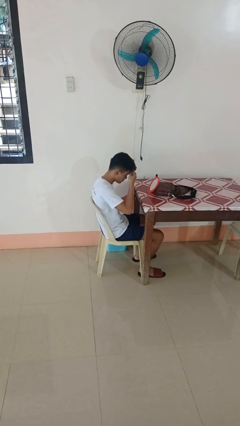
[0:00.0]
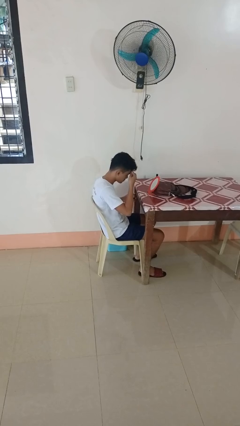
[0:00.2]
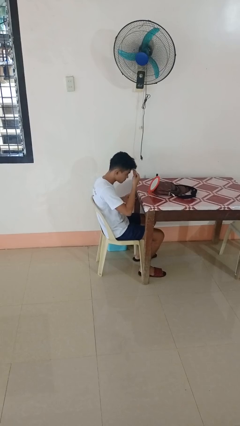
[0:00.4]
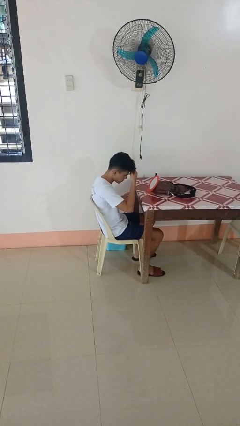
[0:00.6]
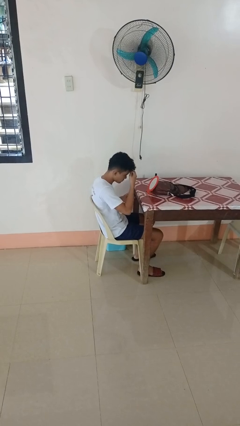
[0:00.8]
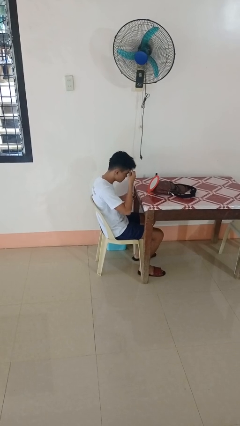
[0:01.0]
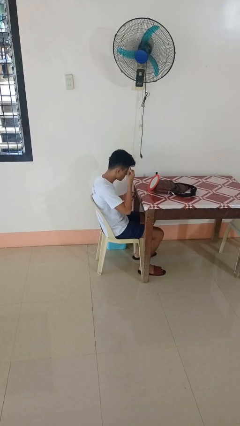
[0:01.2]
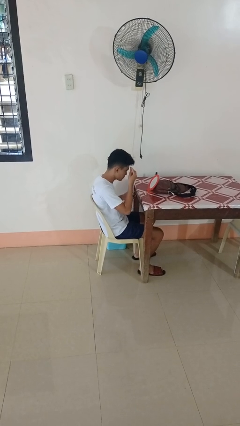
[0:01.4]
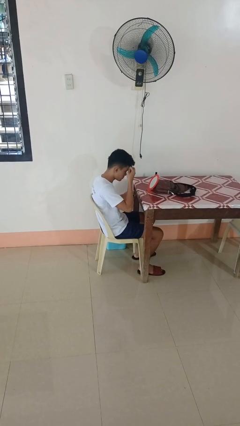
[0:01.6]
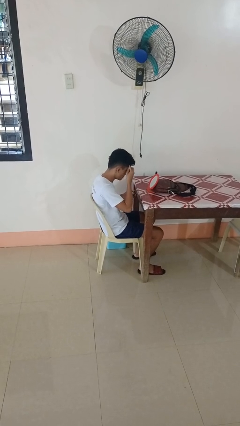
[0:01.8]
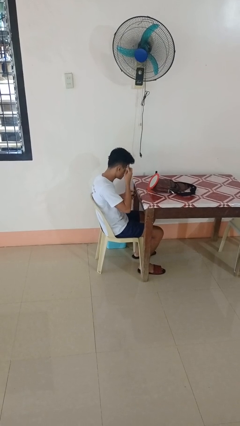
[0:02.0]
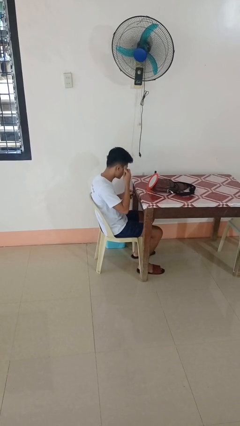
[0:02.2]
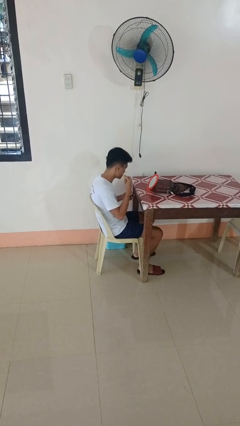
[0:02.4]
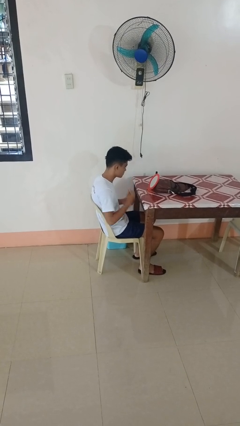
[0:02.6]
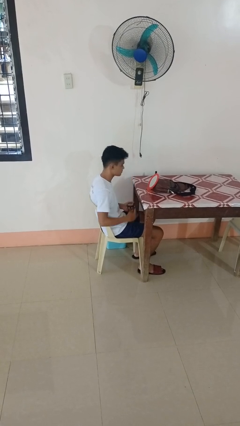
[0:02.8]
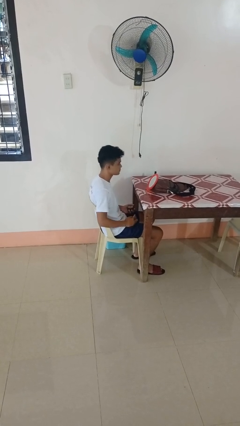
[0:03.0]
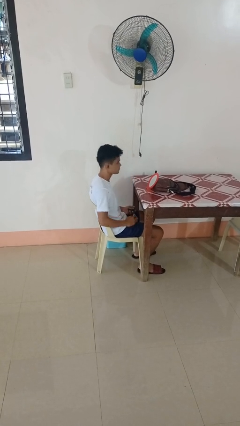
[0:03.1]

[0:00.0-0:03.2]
person applies foundation makeup

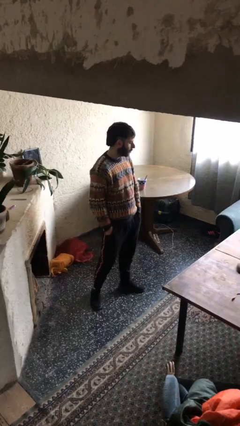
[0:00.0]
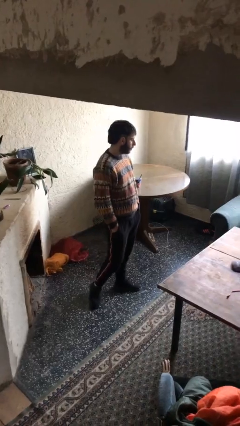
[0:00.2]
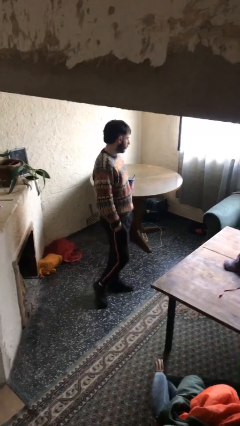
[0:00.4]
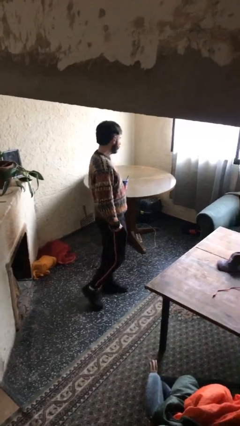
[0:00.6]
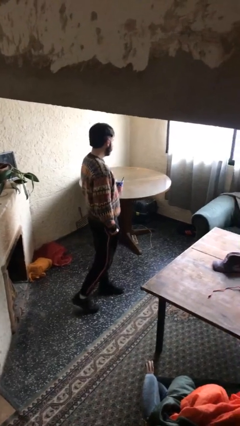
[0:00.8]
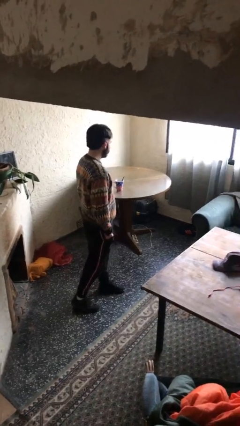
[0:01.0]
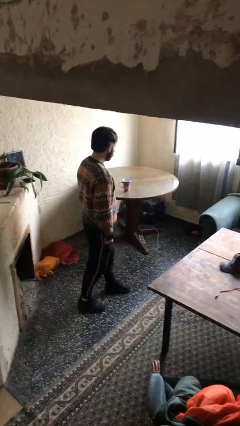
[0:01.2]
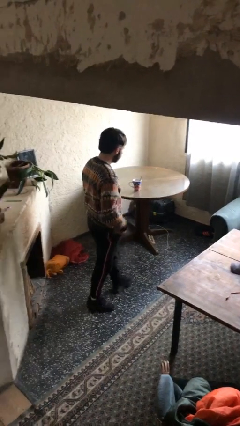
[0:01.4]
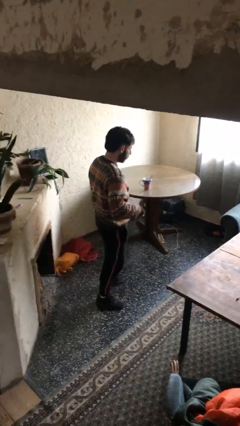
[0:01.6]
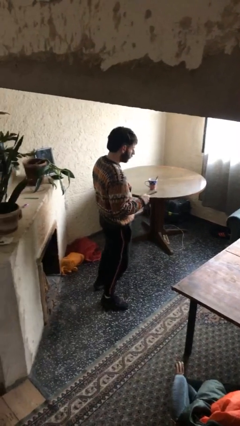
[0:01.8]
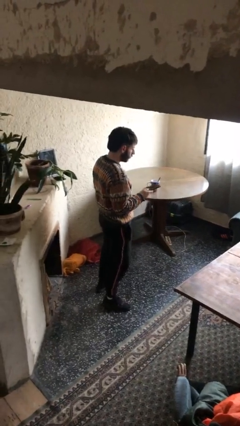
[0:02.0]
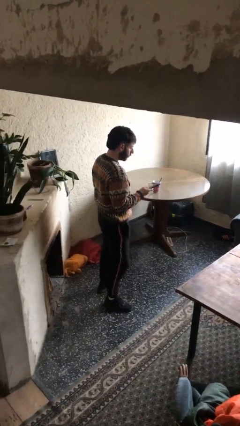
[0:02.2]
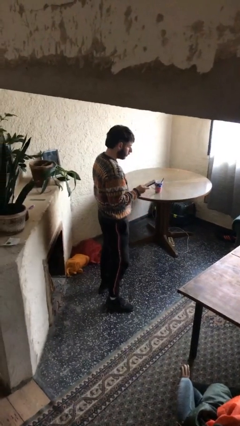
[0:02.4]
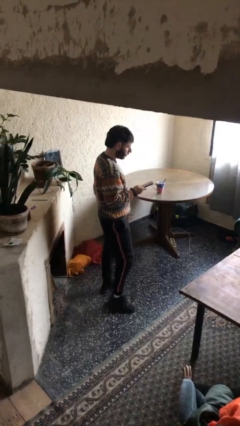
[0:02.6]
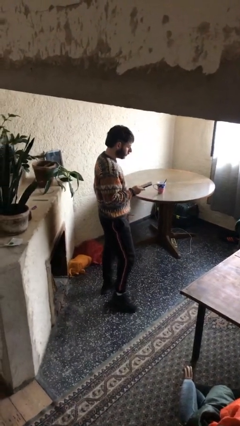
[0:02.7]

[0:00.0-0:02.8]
person takes phone from pocket

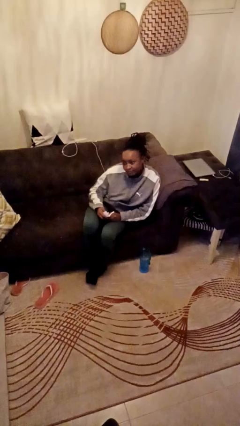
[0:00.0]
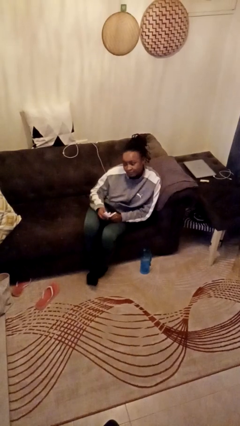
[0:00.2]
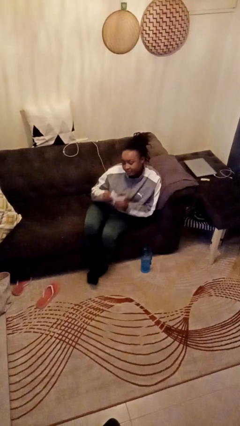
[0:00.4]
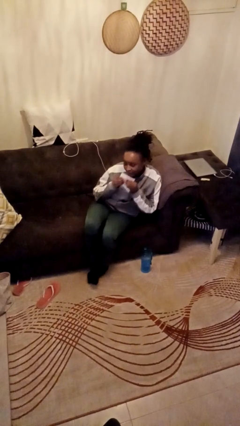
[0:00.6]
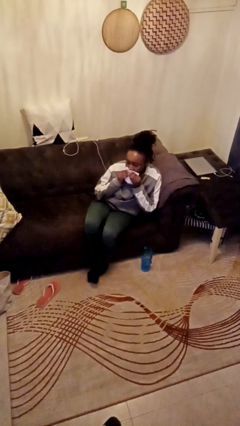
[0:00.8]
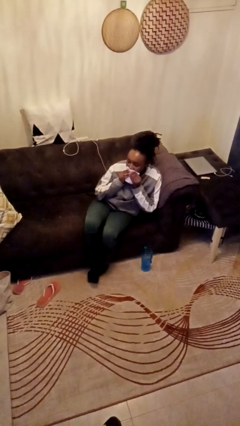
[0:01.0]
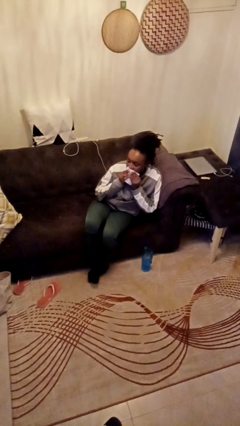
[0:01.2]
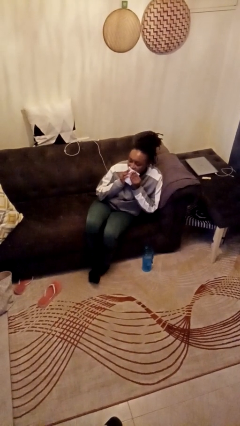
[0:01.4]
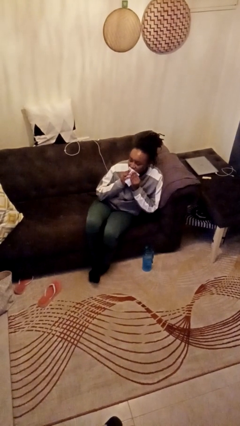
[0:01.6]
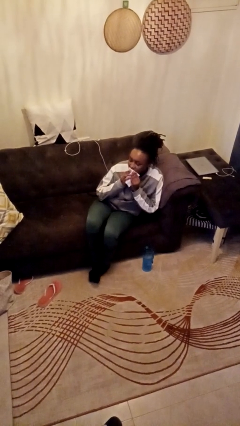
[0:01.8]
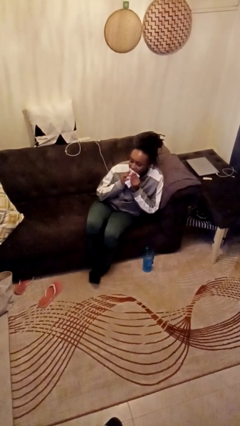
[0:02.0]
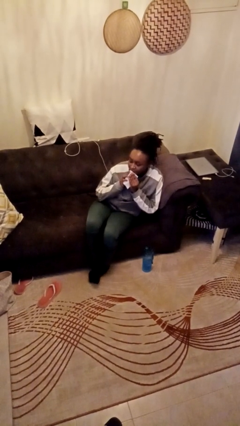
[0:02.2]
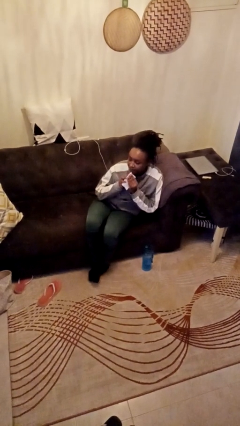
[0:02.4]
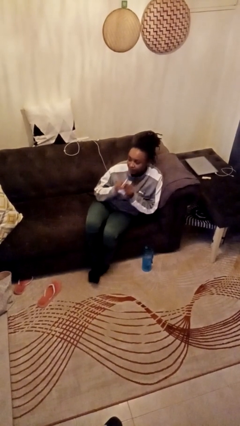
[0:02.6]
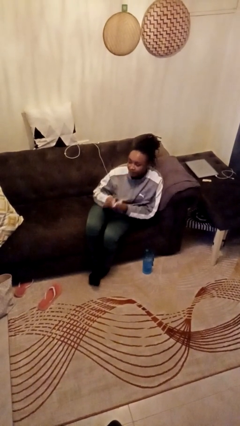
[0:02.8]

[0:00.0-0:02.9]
person wipes mouth with napkin

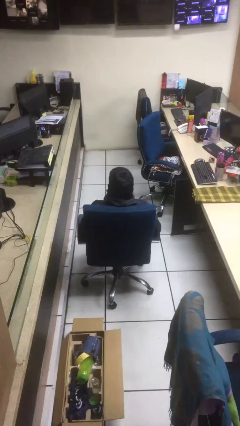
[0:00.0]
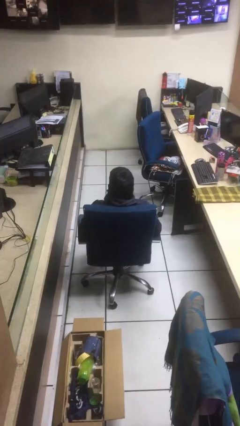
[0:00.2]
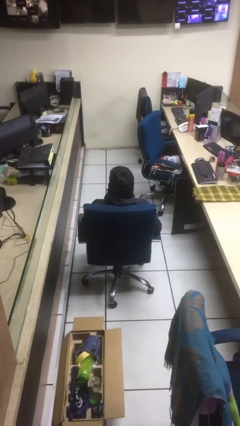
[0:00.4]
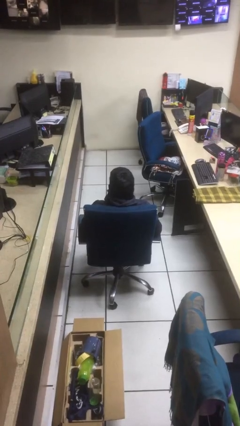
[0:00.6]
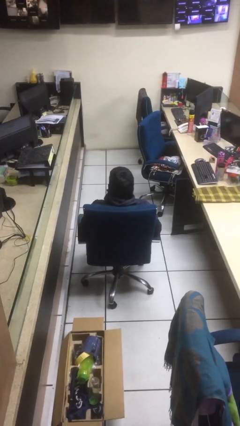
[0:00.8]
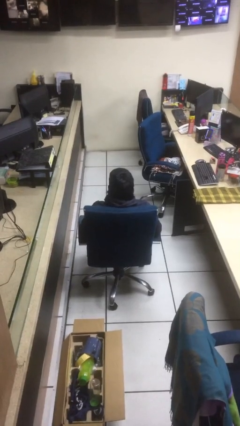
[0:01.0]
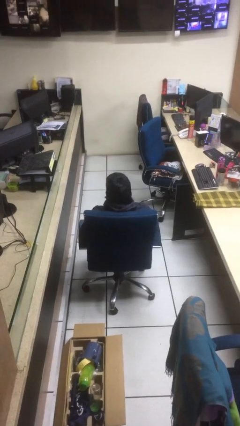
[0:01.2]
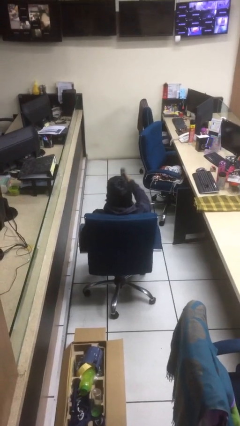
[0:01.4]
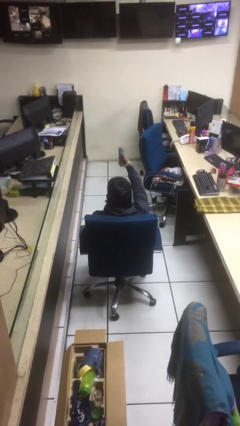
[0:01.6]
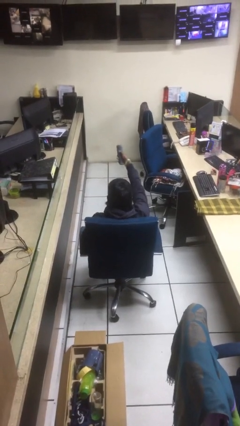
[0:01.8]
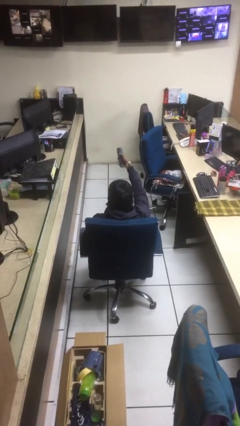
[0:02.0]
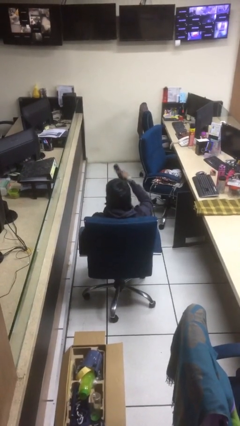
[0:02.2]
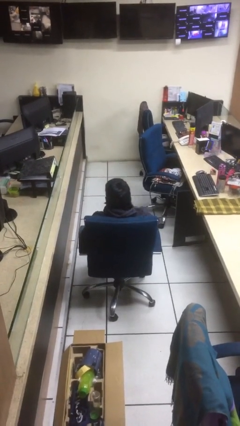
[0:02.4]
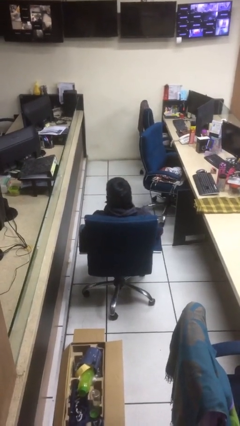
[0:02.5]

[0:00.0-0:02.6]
person uses television remote

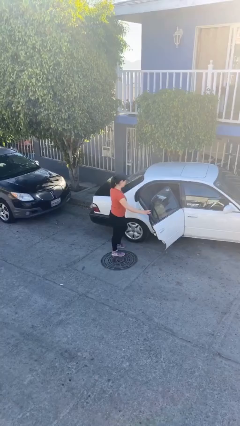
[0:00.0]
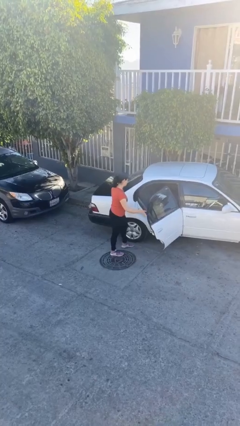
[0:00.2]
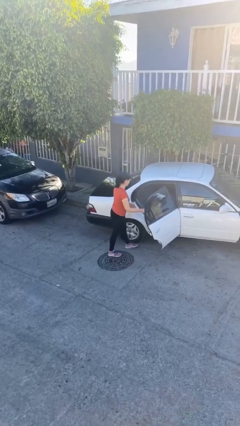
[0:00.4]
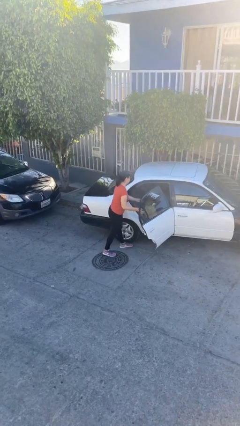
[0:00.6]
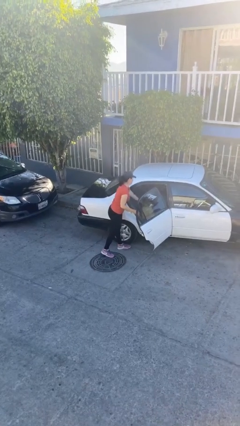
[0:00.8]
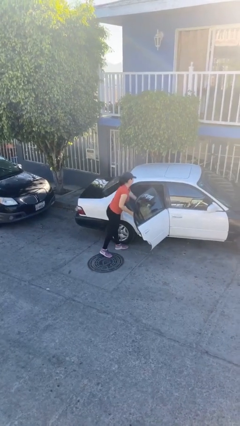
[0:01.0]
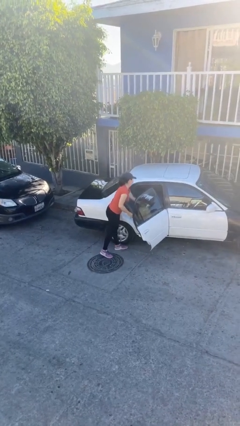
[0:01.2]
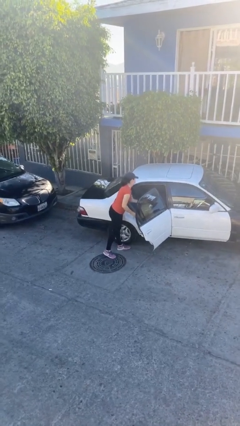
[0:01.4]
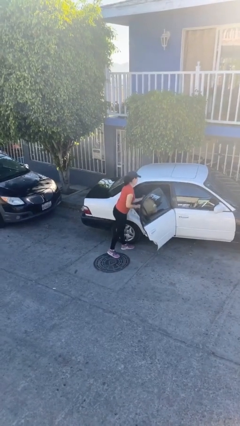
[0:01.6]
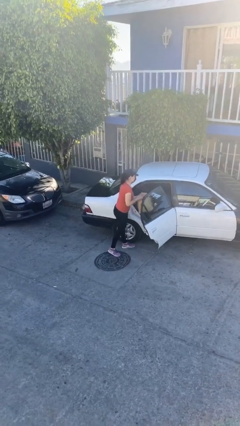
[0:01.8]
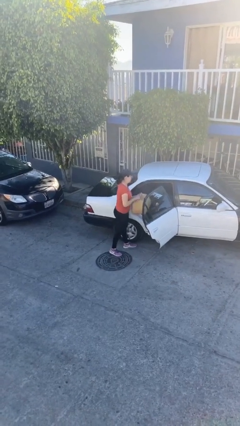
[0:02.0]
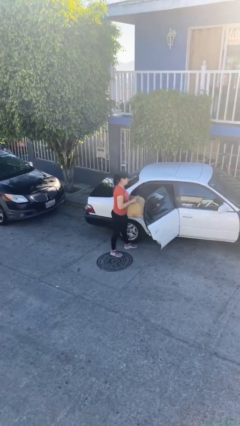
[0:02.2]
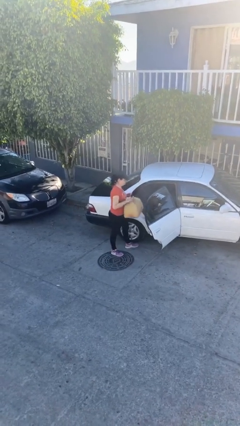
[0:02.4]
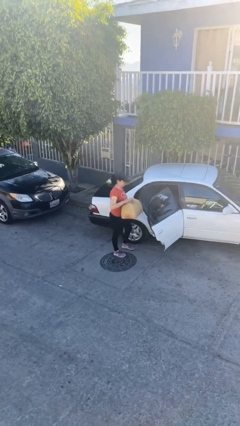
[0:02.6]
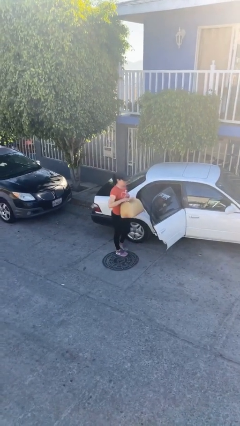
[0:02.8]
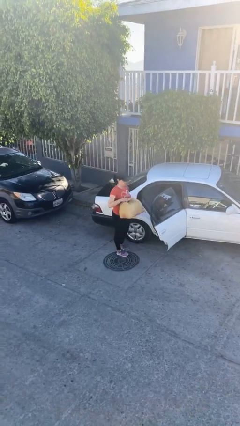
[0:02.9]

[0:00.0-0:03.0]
person unloads car

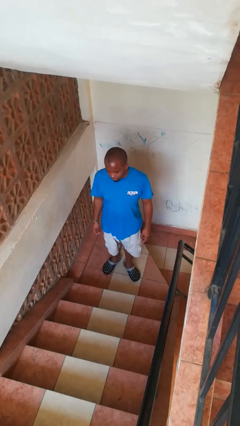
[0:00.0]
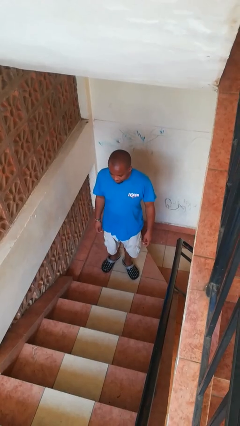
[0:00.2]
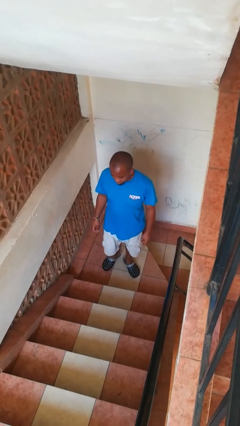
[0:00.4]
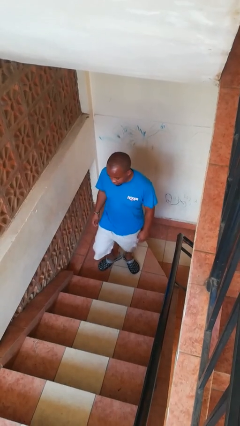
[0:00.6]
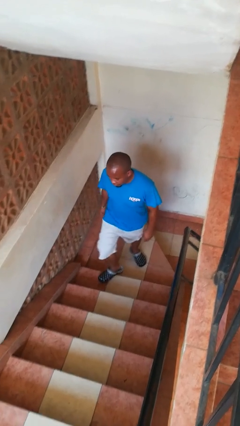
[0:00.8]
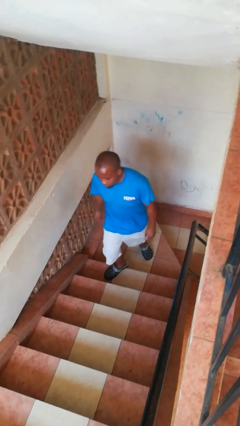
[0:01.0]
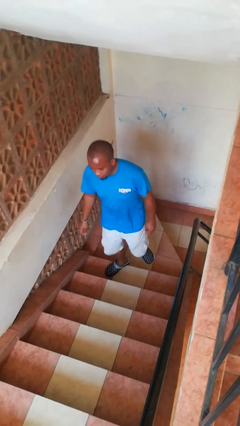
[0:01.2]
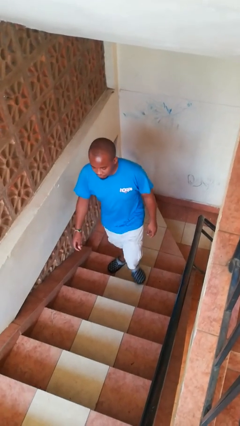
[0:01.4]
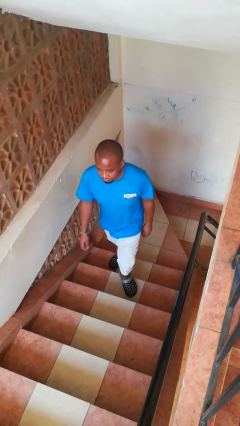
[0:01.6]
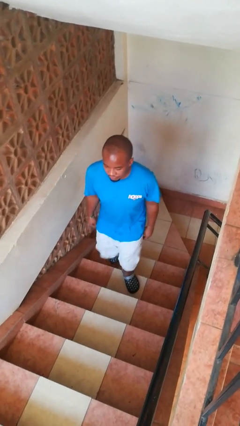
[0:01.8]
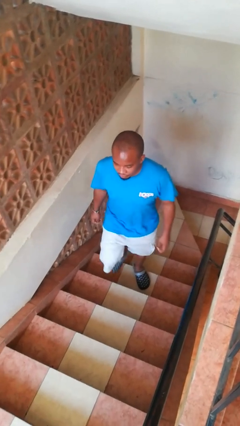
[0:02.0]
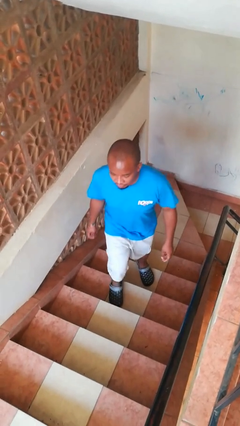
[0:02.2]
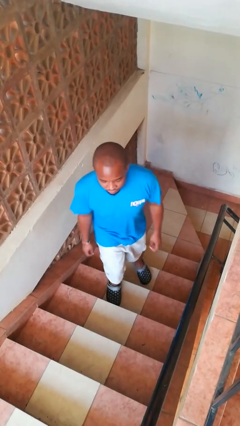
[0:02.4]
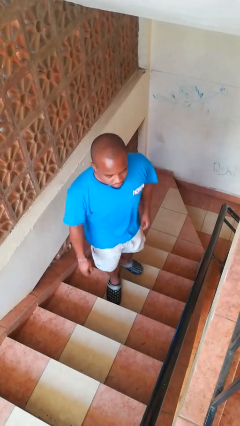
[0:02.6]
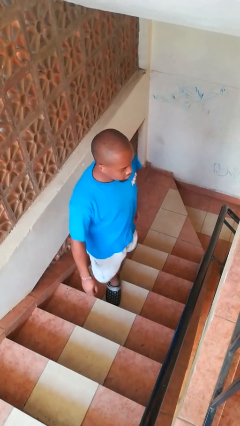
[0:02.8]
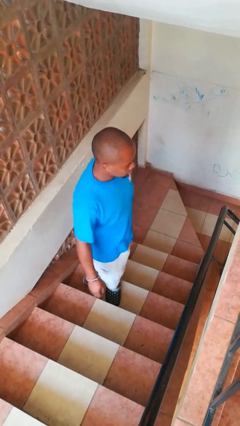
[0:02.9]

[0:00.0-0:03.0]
person climbs up stairs
